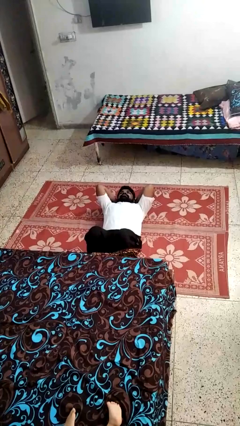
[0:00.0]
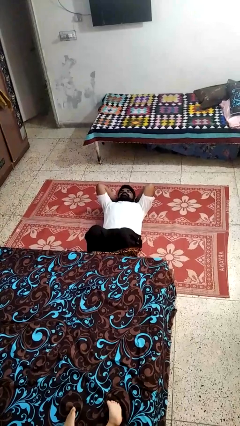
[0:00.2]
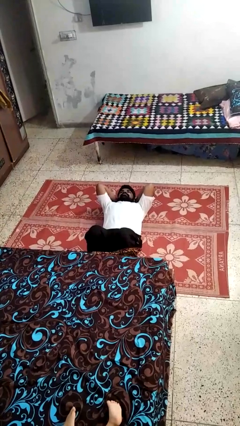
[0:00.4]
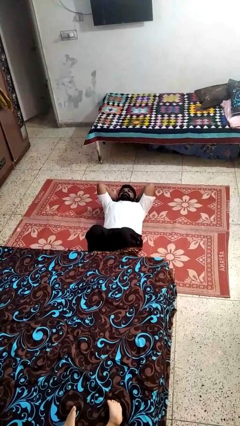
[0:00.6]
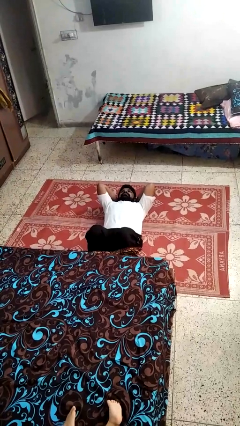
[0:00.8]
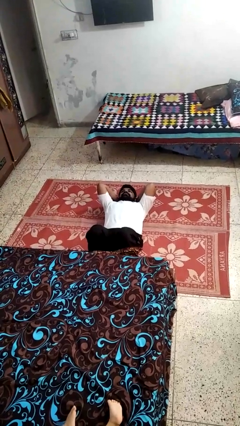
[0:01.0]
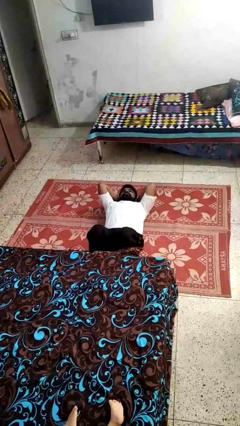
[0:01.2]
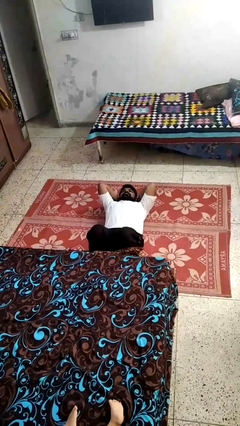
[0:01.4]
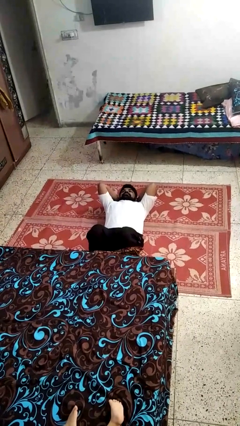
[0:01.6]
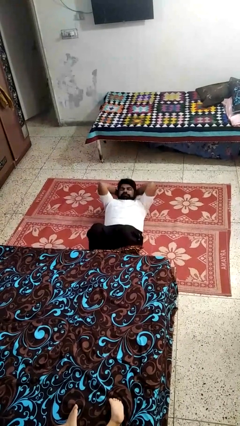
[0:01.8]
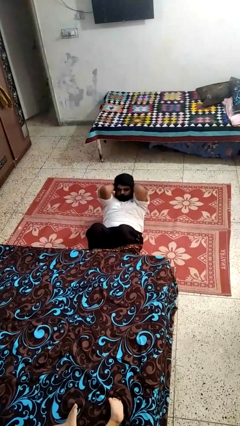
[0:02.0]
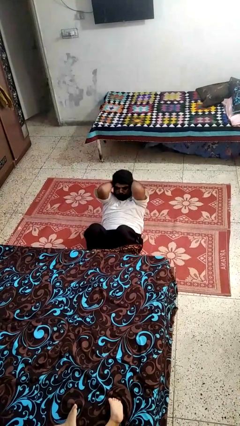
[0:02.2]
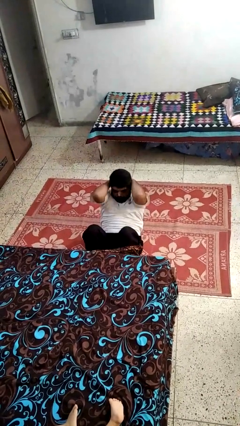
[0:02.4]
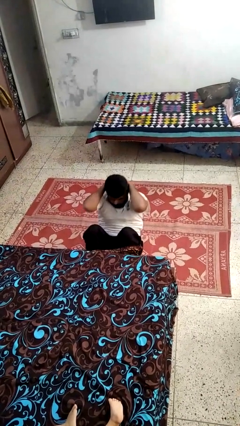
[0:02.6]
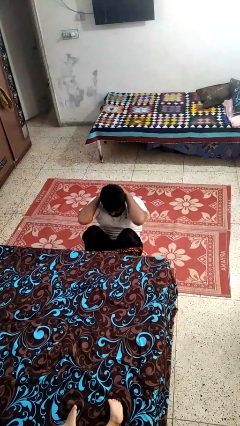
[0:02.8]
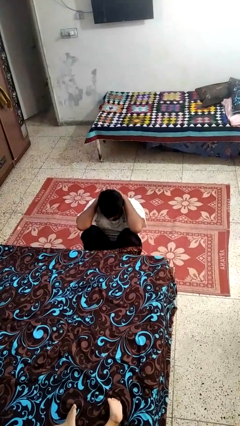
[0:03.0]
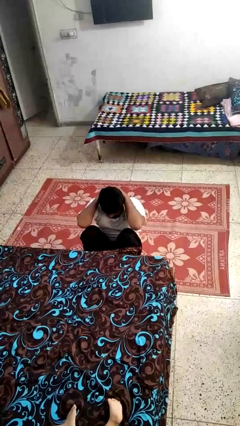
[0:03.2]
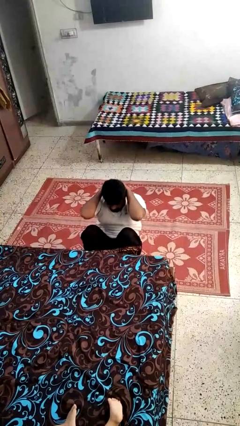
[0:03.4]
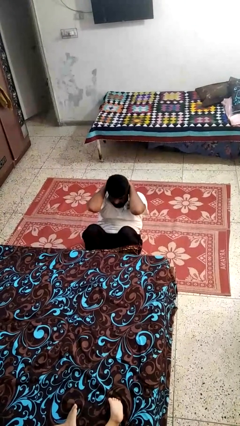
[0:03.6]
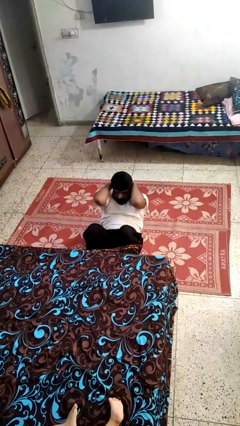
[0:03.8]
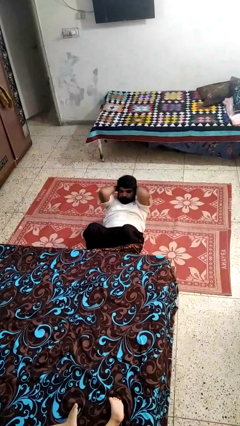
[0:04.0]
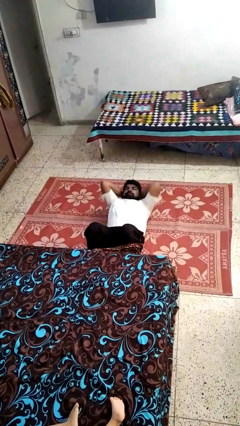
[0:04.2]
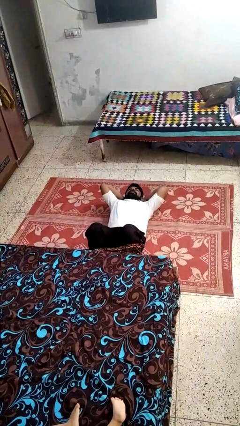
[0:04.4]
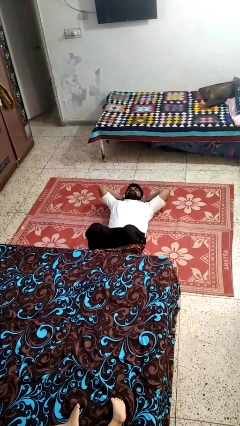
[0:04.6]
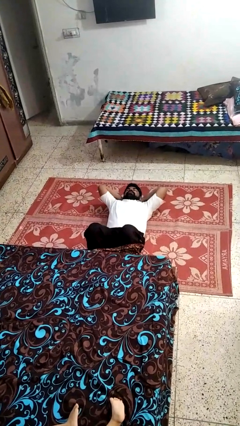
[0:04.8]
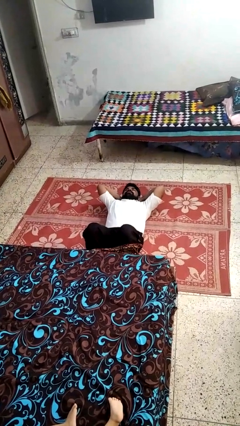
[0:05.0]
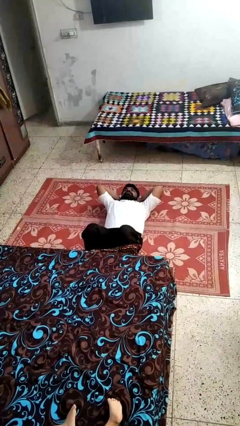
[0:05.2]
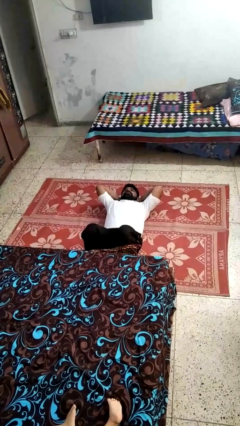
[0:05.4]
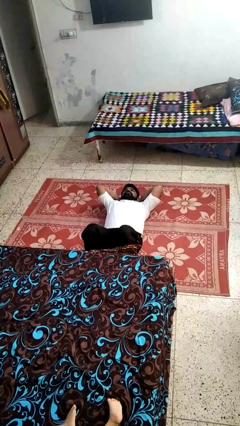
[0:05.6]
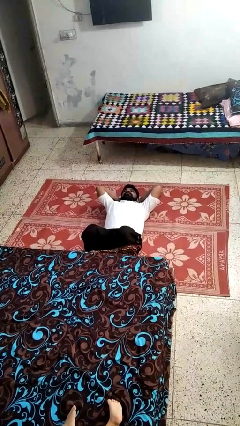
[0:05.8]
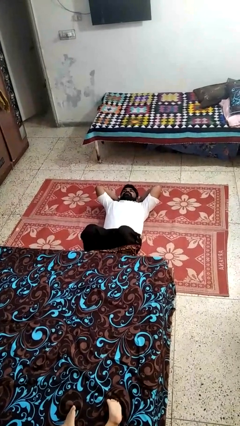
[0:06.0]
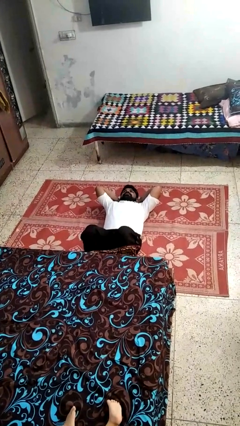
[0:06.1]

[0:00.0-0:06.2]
person exercises with situp

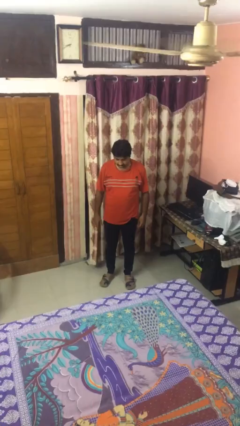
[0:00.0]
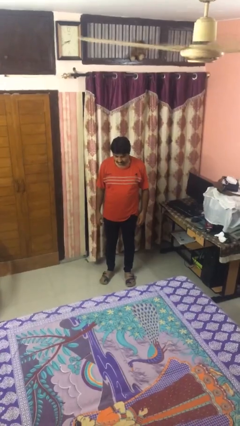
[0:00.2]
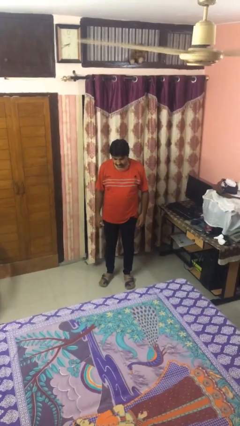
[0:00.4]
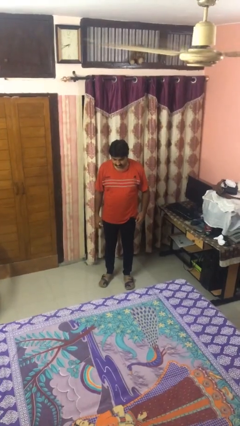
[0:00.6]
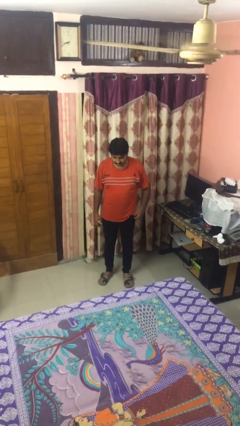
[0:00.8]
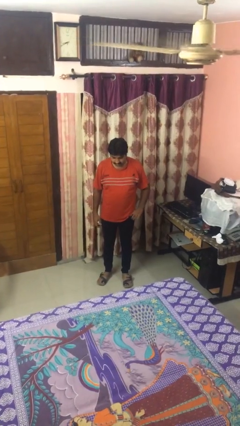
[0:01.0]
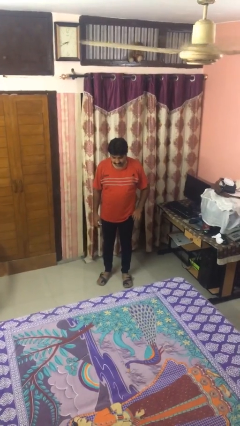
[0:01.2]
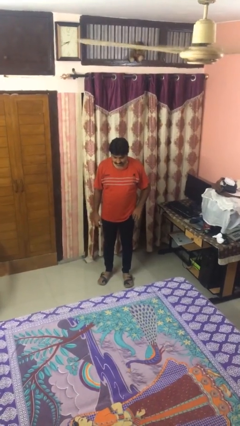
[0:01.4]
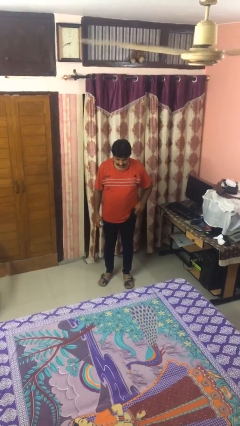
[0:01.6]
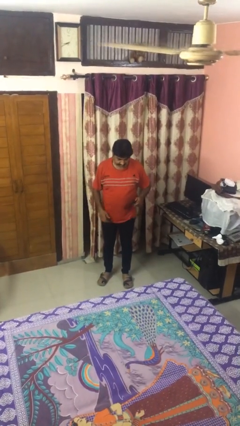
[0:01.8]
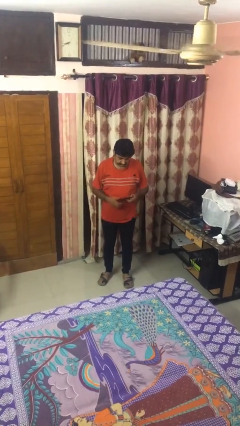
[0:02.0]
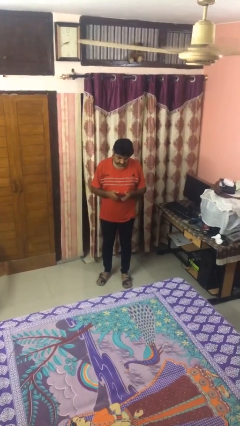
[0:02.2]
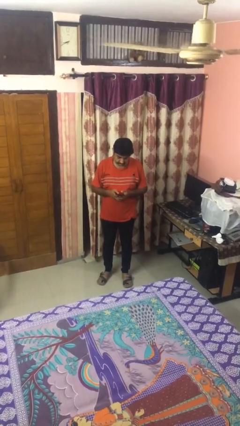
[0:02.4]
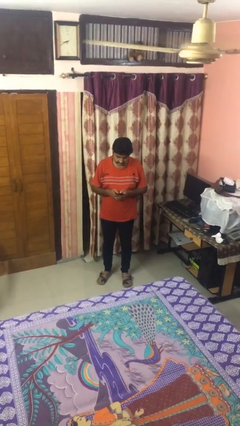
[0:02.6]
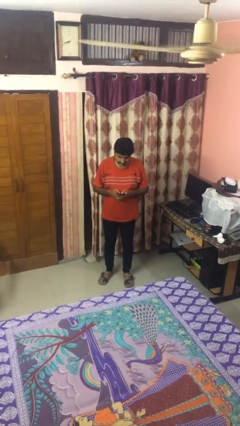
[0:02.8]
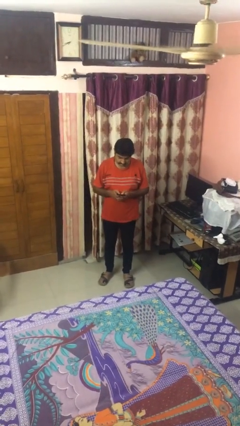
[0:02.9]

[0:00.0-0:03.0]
person takes phone from pocket

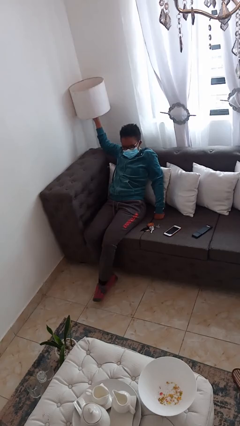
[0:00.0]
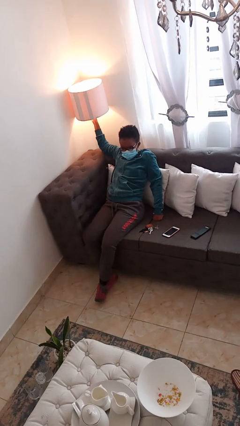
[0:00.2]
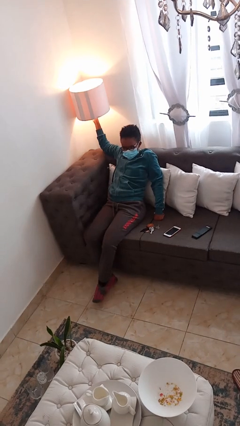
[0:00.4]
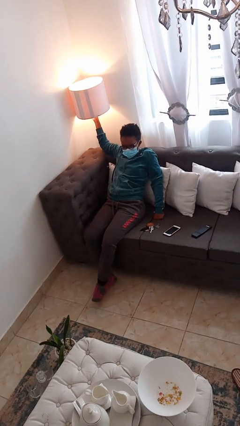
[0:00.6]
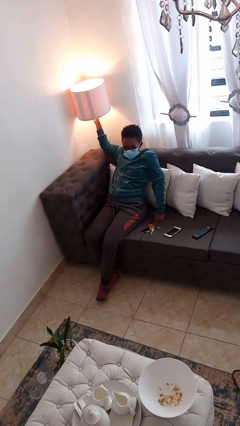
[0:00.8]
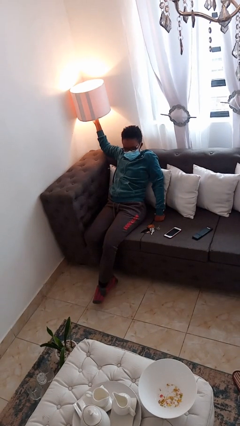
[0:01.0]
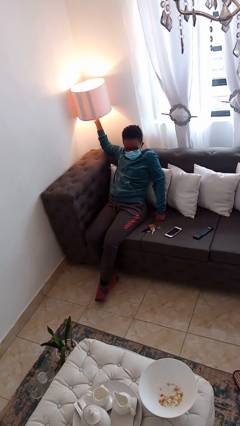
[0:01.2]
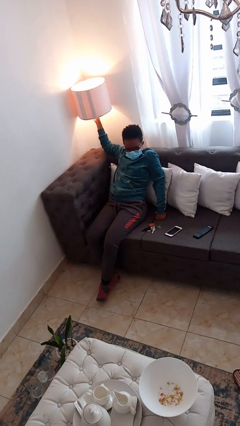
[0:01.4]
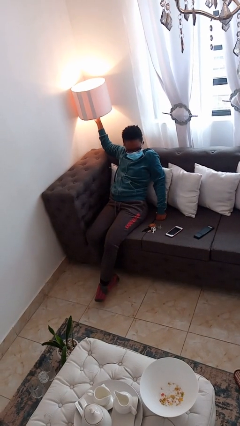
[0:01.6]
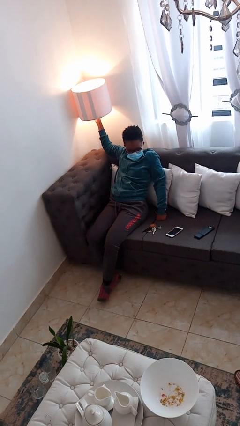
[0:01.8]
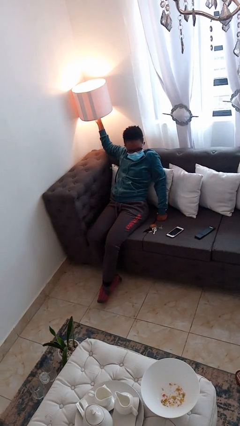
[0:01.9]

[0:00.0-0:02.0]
person turns on lamp

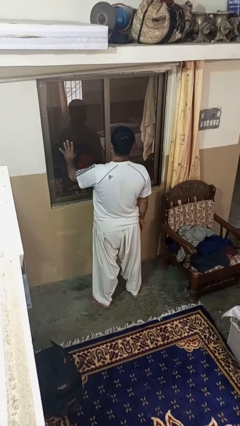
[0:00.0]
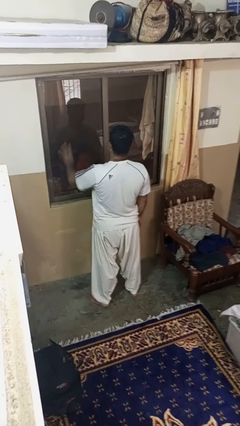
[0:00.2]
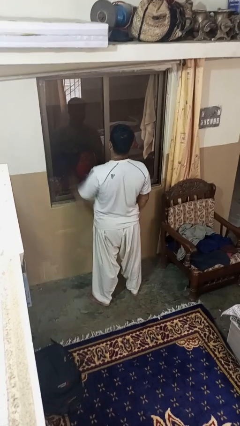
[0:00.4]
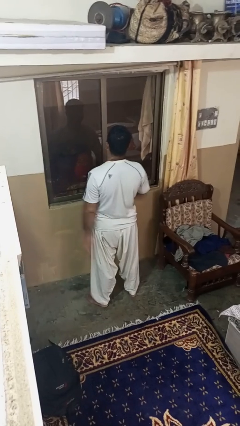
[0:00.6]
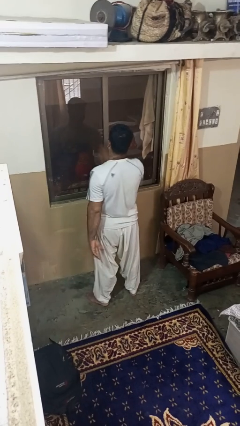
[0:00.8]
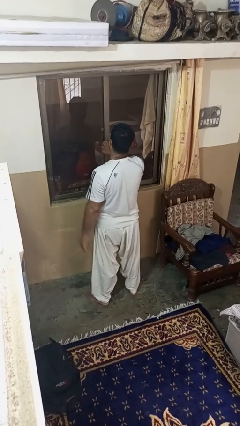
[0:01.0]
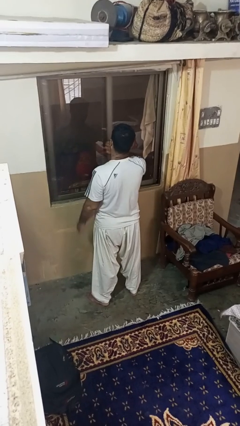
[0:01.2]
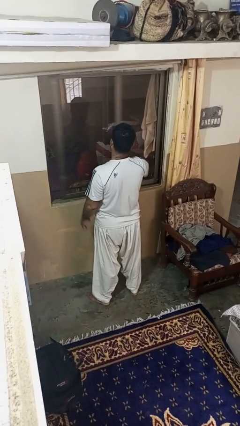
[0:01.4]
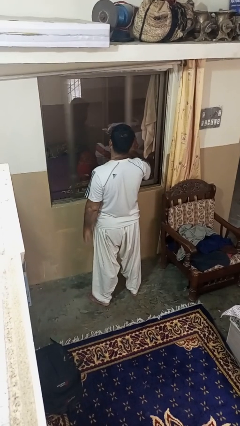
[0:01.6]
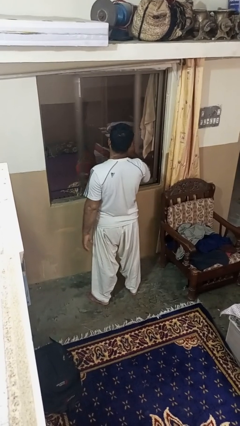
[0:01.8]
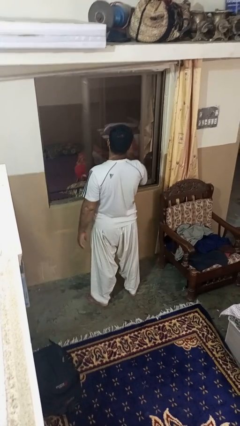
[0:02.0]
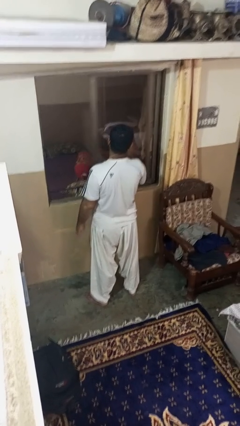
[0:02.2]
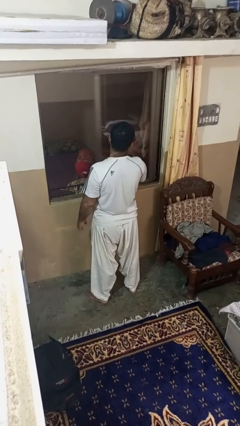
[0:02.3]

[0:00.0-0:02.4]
person opens home window

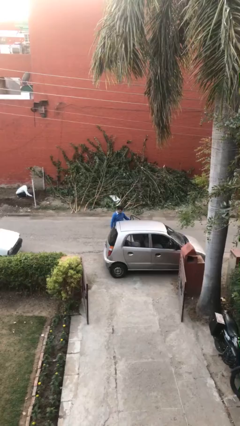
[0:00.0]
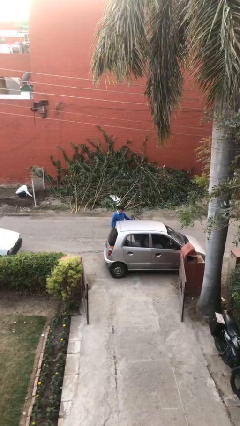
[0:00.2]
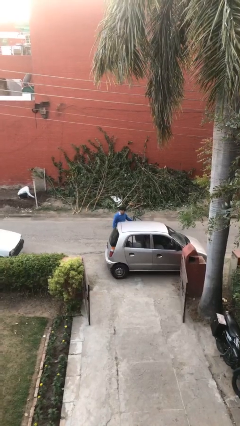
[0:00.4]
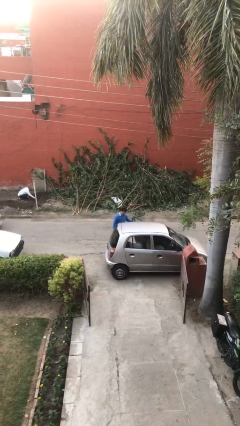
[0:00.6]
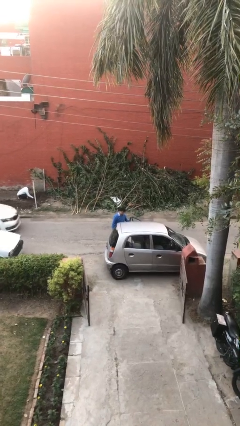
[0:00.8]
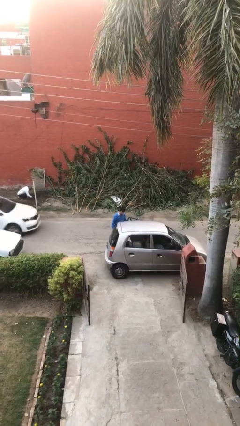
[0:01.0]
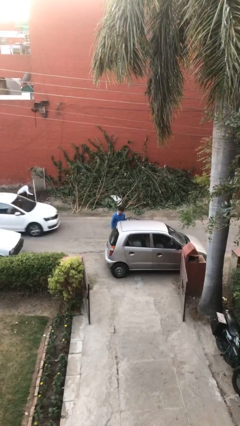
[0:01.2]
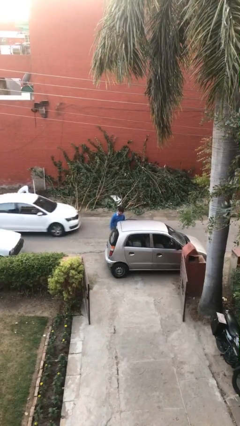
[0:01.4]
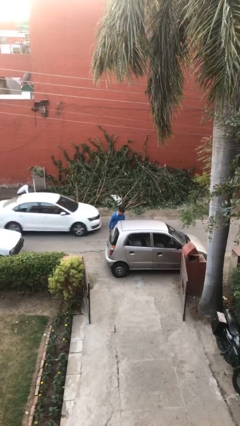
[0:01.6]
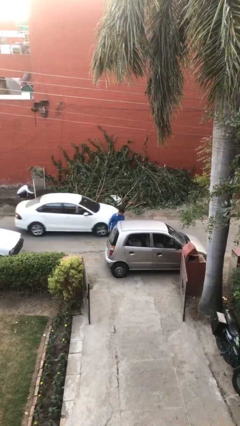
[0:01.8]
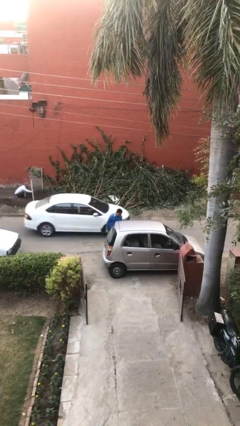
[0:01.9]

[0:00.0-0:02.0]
person closes car door

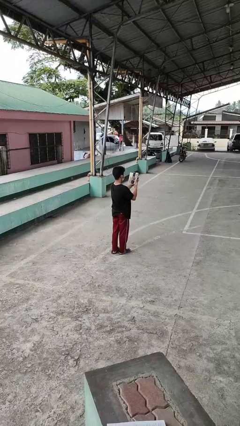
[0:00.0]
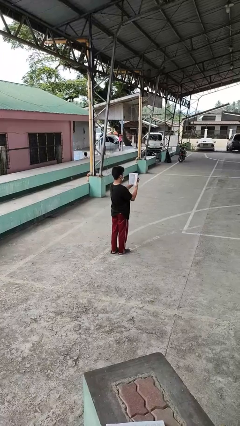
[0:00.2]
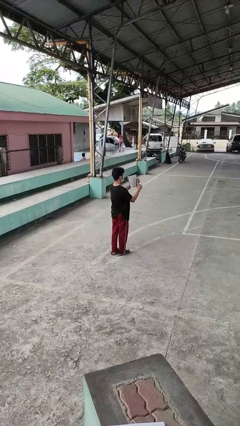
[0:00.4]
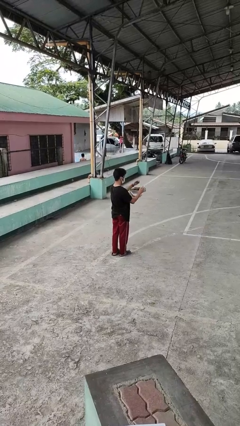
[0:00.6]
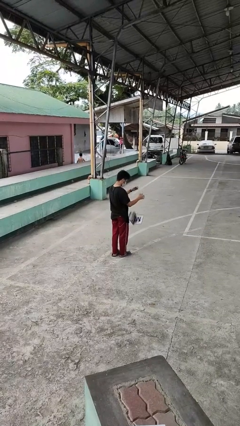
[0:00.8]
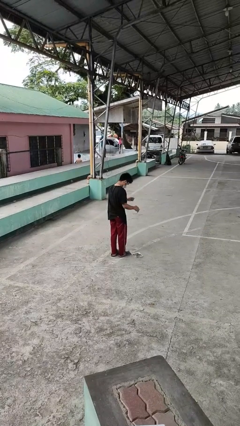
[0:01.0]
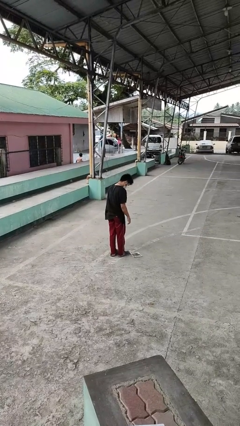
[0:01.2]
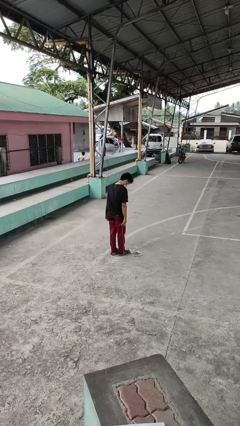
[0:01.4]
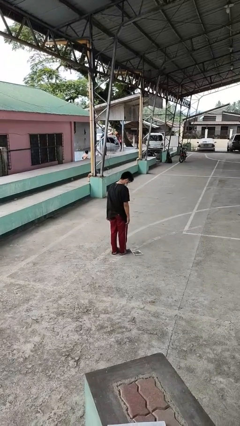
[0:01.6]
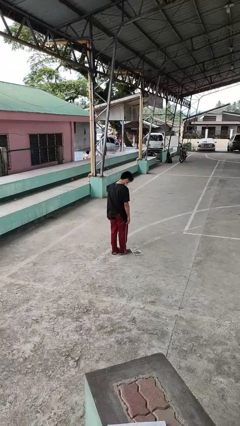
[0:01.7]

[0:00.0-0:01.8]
person drops object
